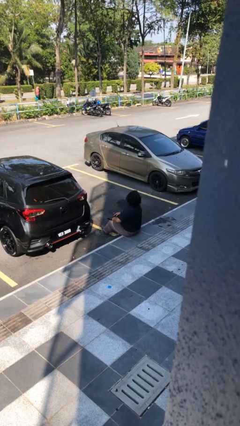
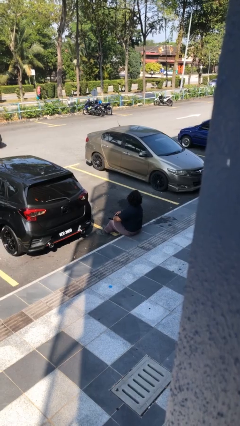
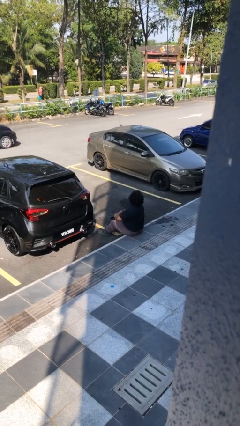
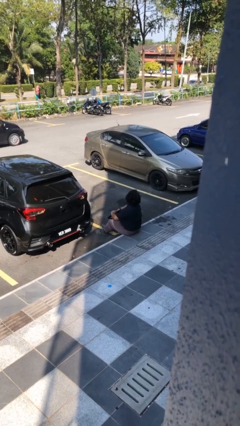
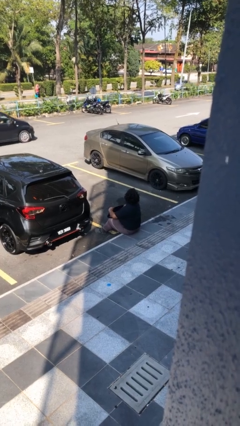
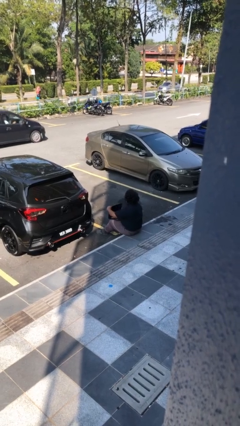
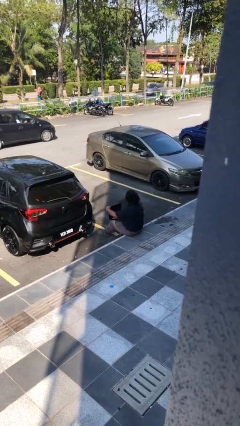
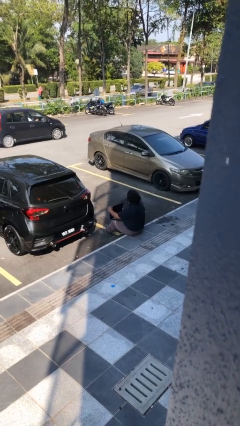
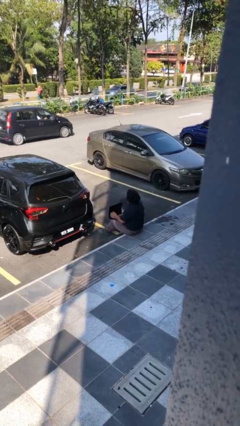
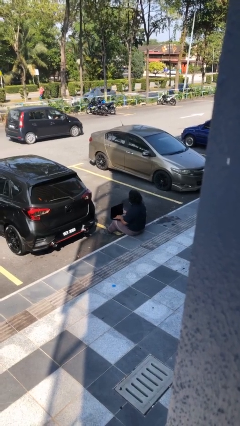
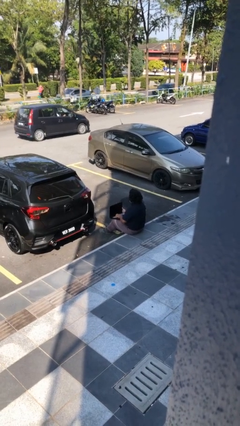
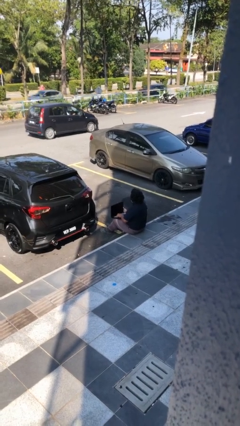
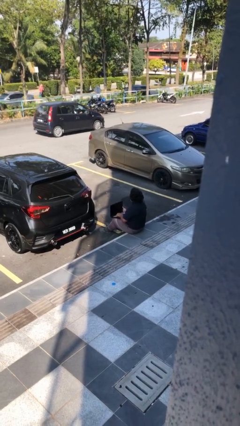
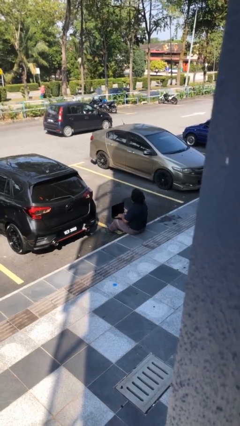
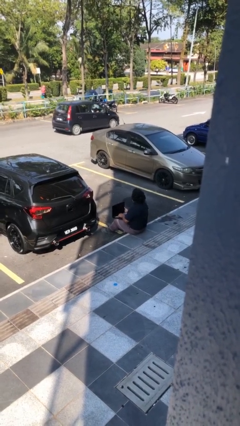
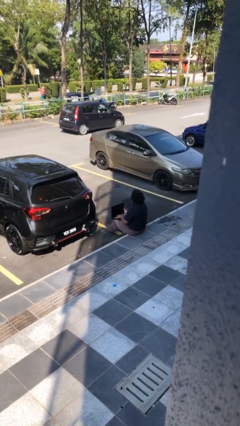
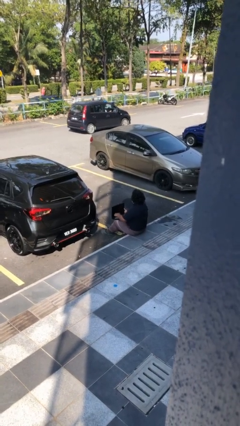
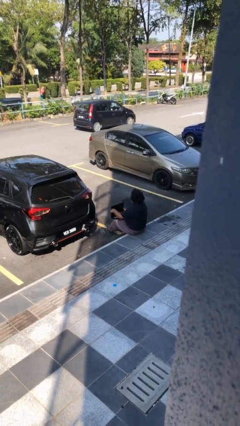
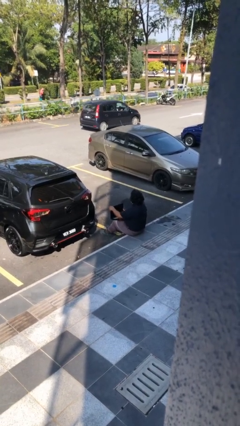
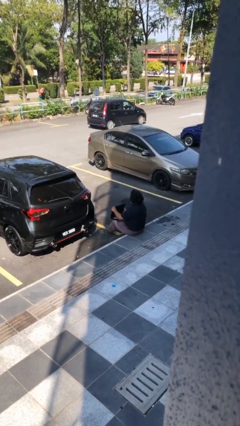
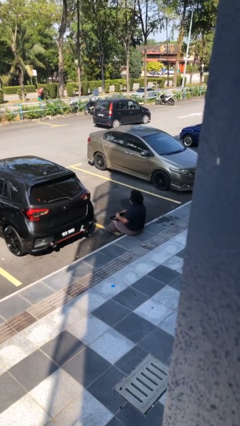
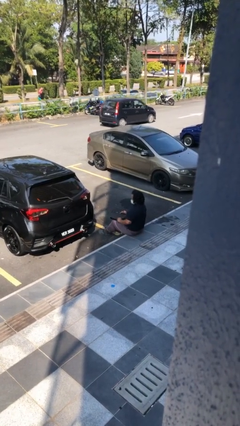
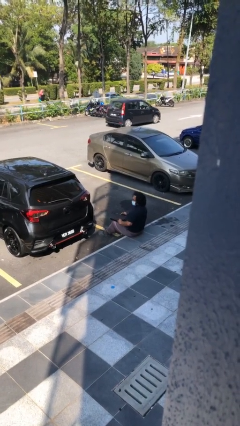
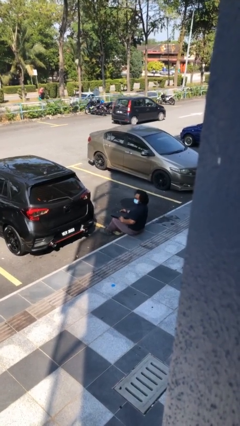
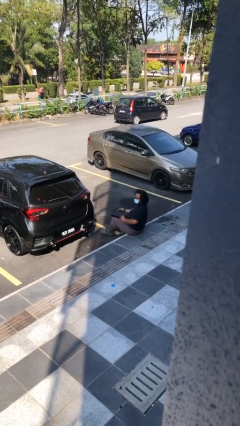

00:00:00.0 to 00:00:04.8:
person interacts with laptop

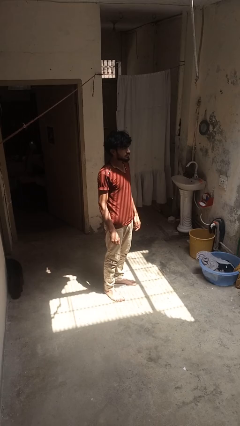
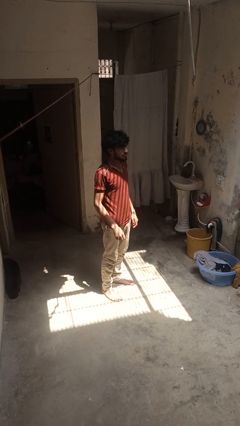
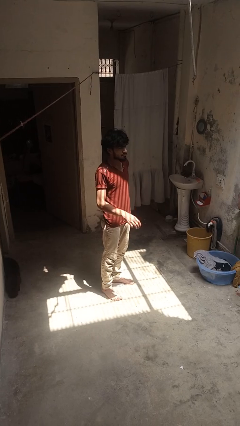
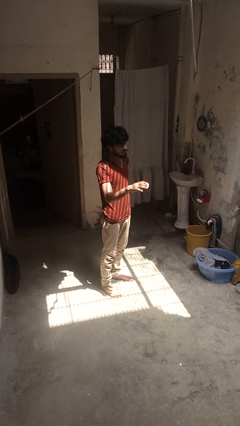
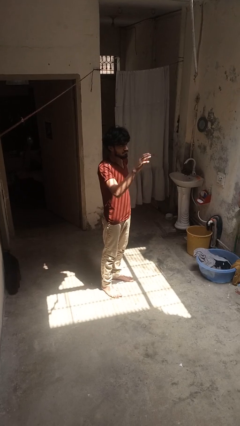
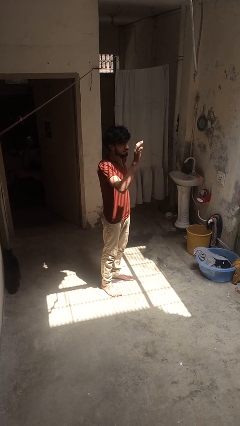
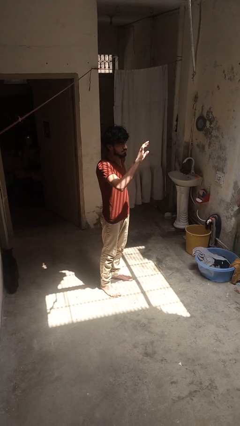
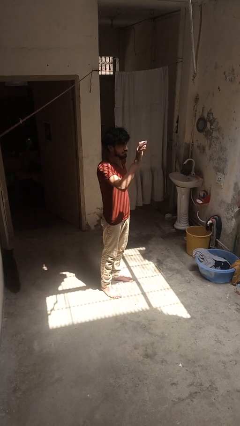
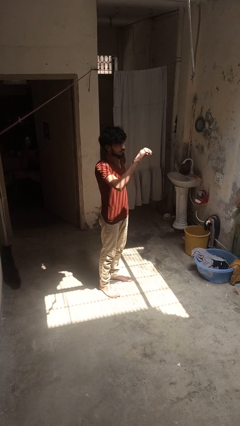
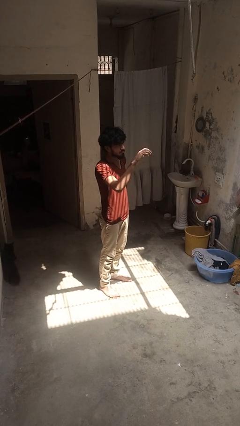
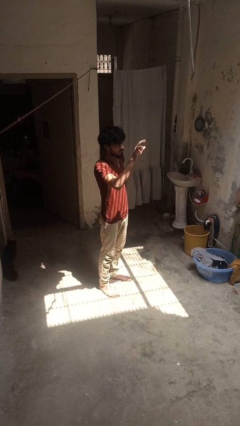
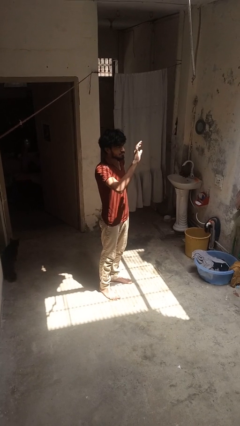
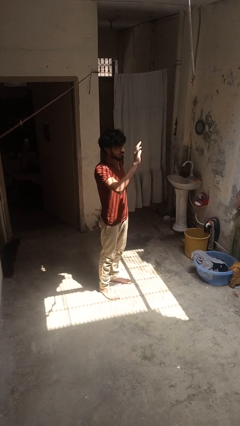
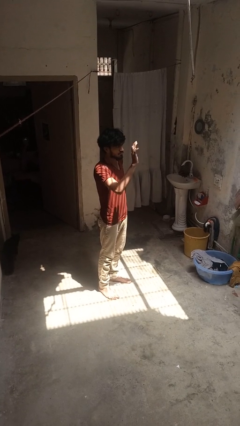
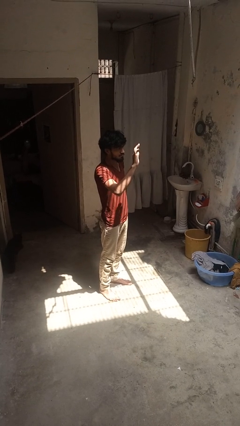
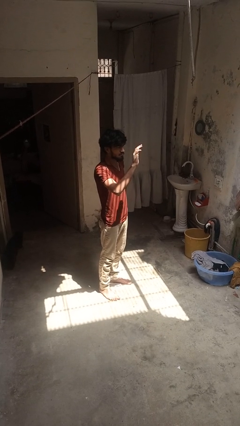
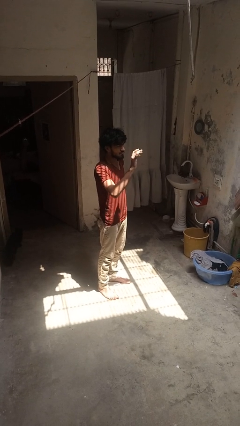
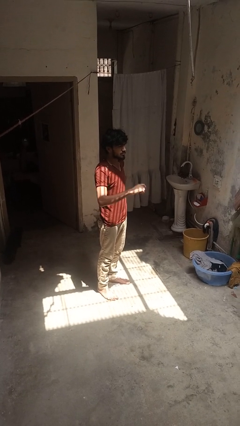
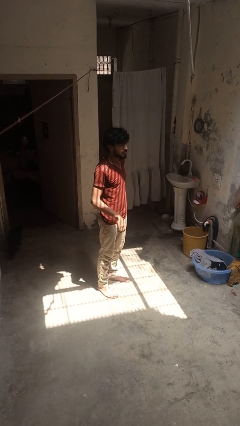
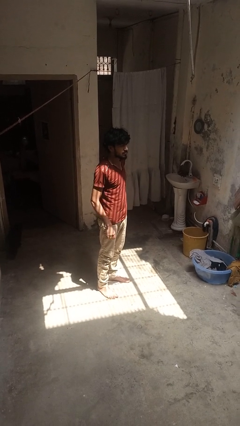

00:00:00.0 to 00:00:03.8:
person waves at person

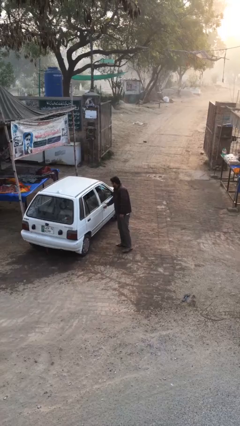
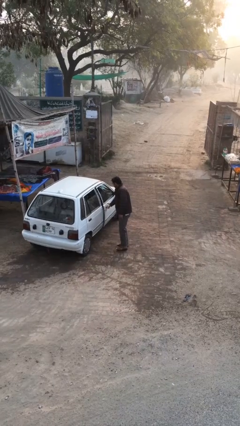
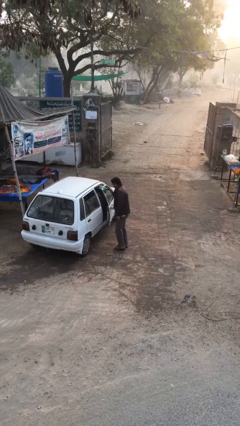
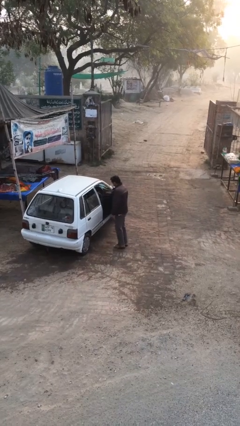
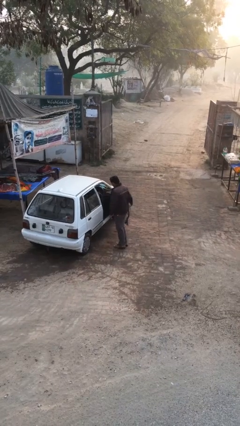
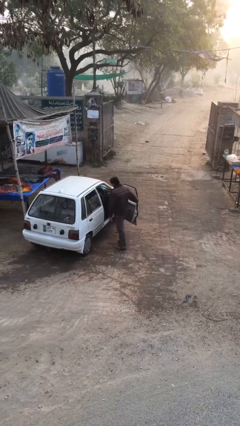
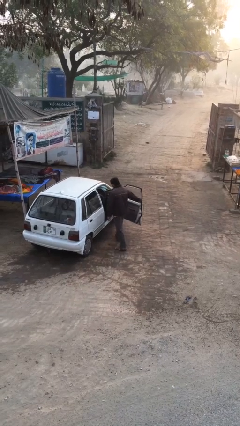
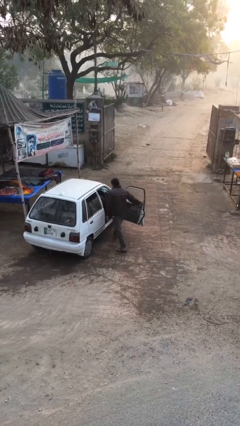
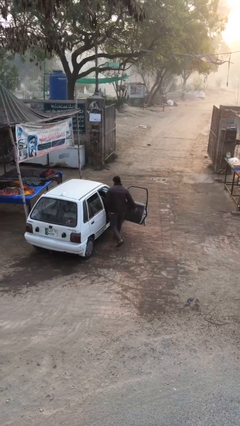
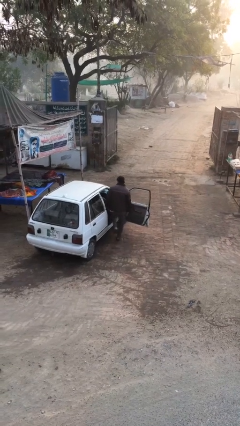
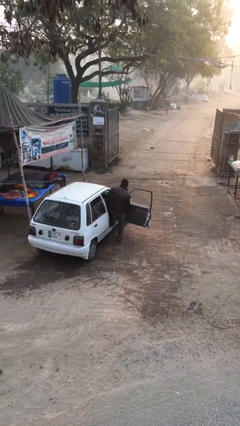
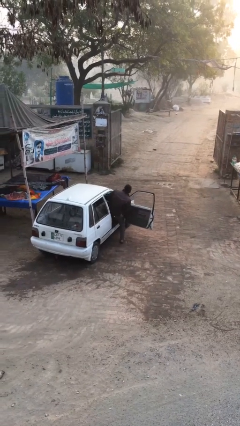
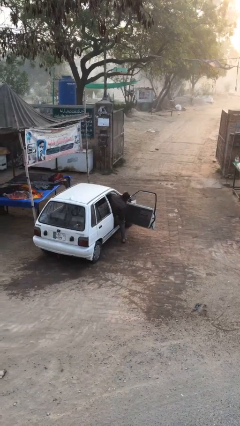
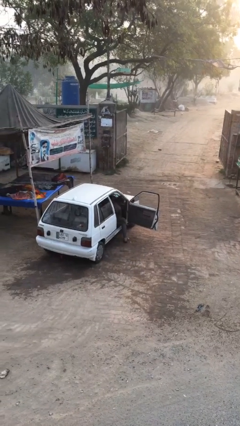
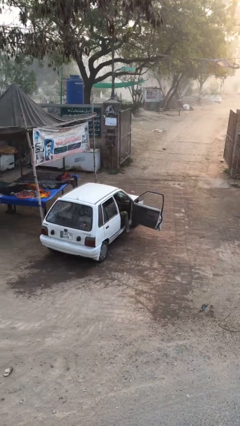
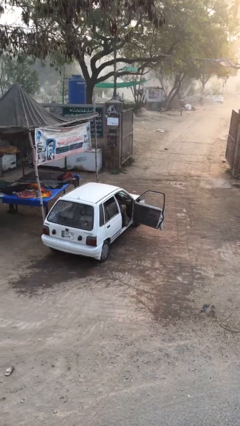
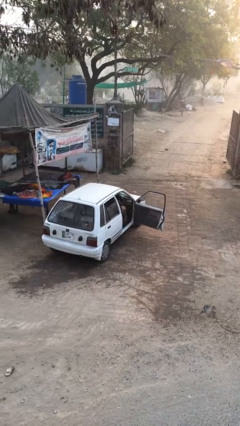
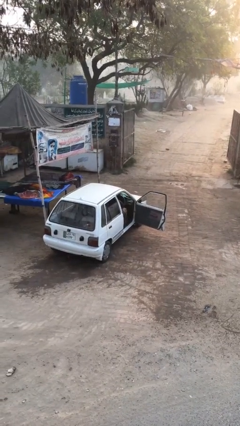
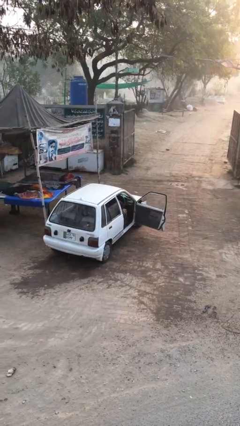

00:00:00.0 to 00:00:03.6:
person enters car

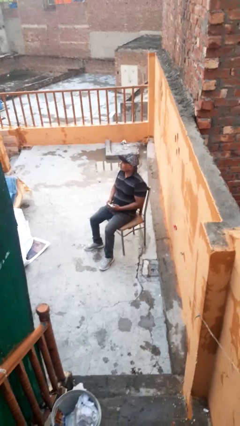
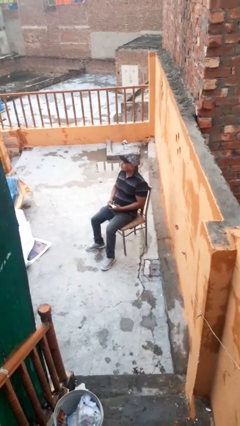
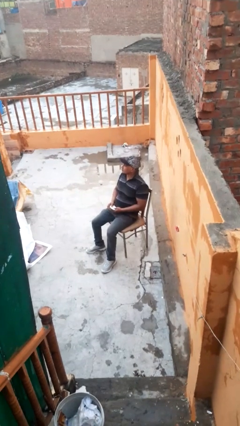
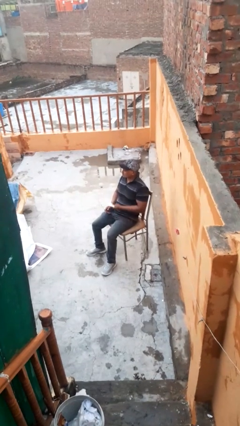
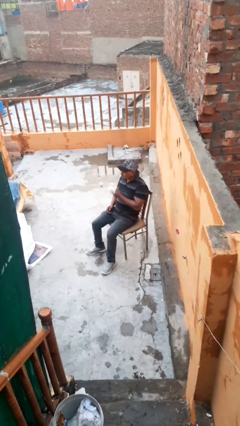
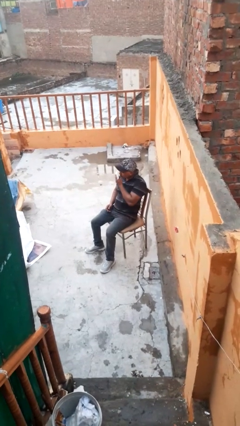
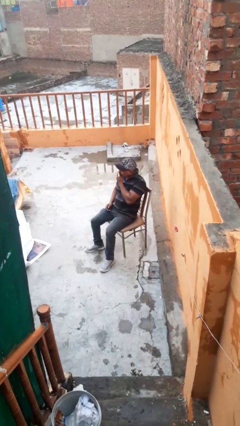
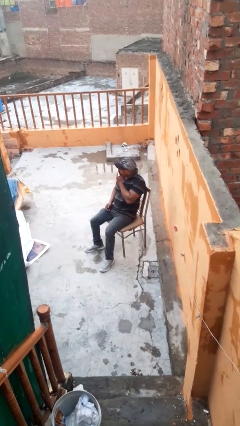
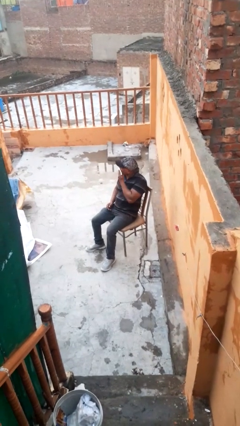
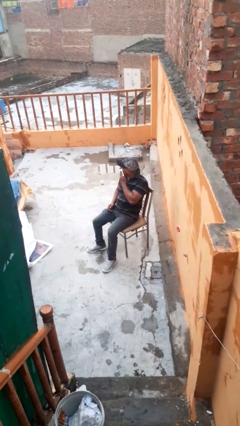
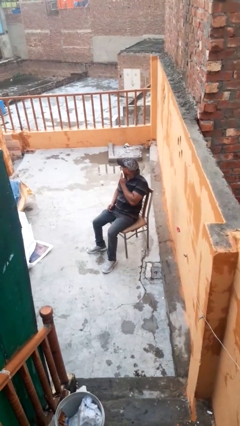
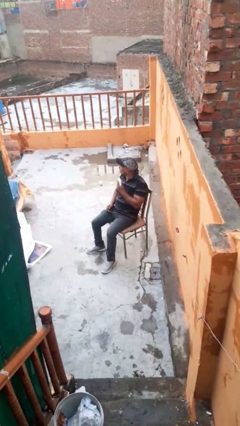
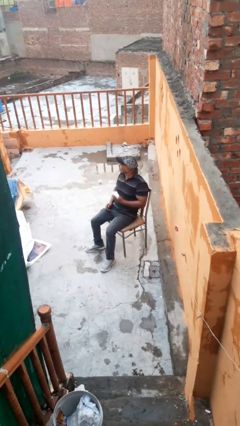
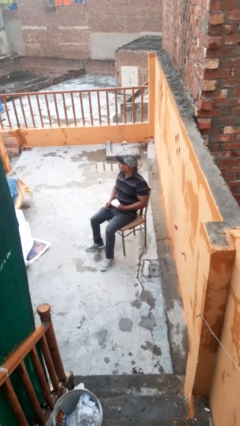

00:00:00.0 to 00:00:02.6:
person wipes mouth with napkin

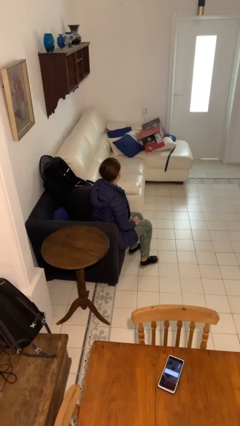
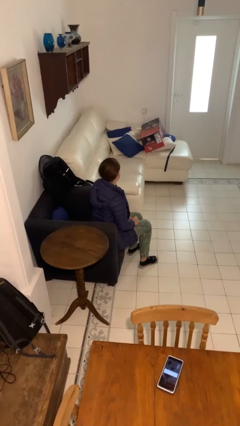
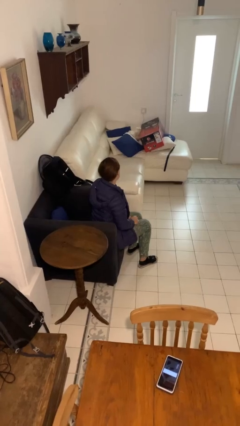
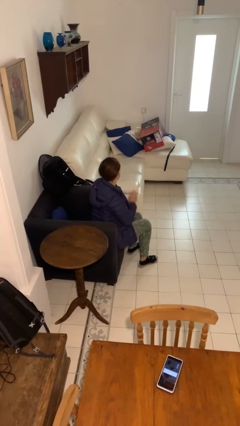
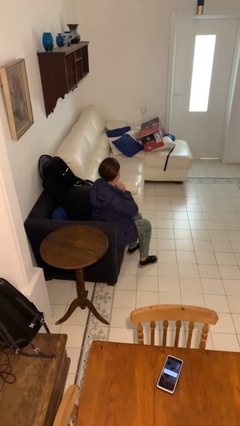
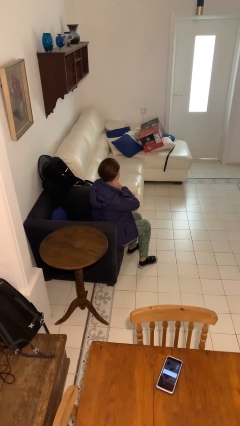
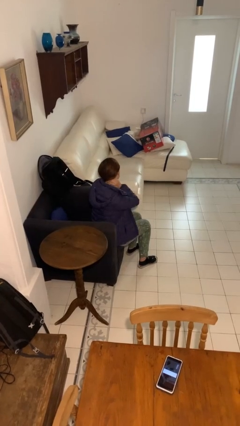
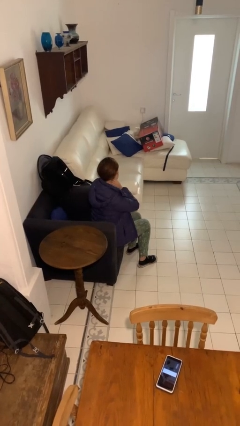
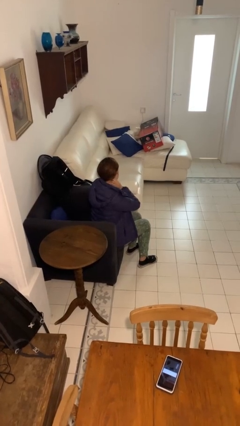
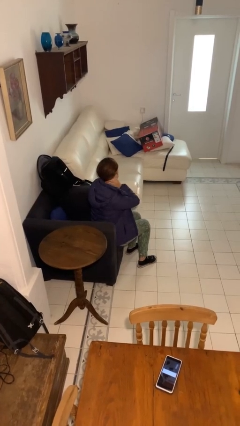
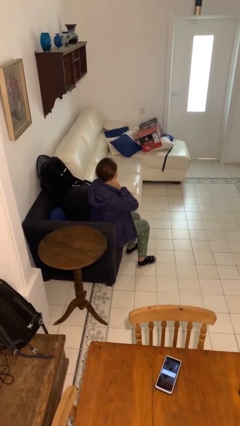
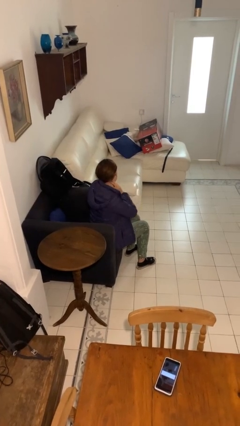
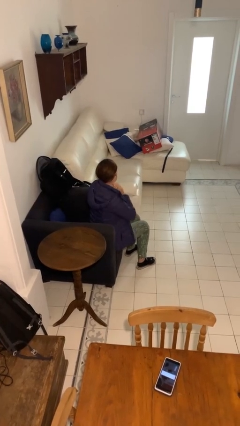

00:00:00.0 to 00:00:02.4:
person rubs neck

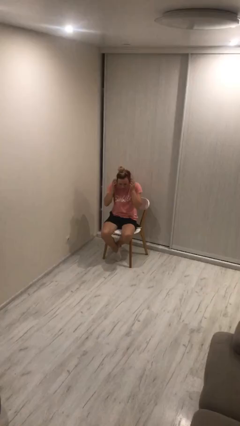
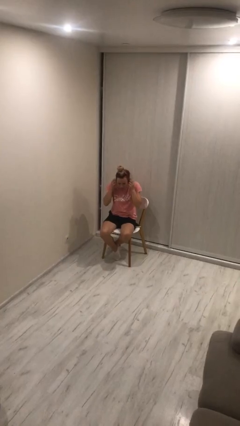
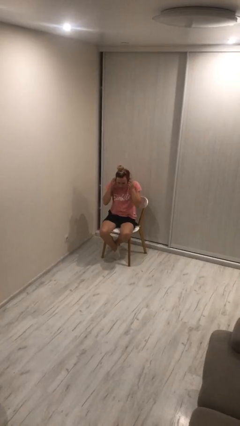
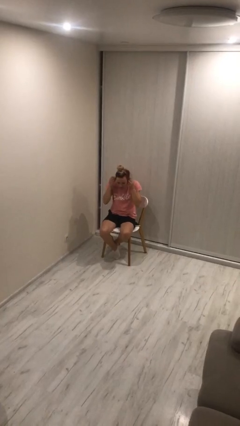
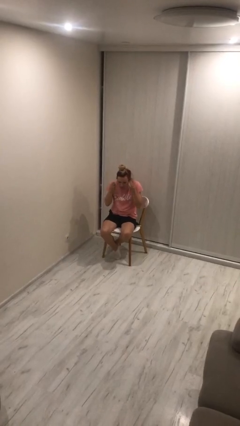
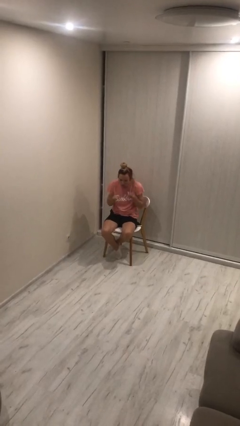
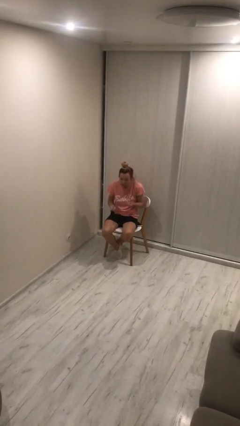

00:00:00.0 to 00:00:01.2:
person takes off earrings
